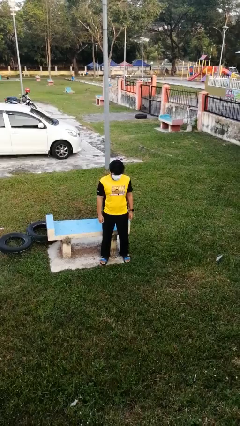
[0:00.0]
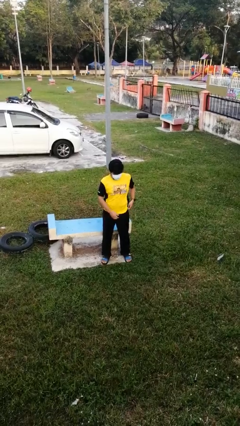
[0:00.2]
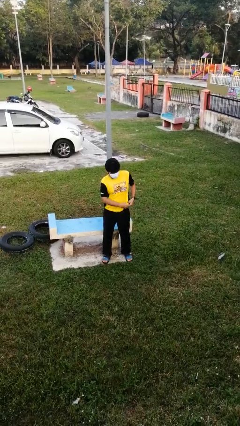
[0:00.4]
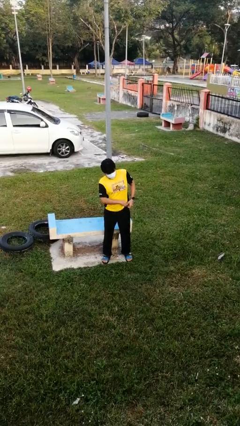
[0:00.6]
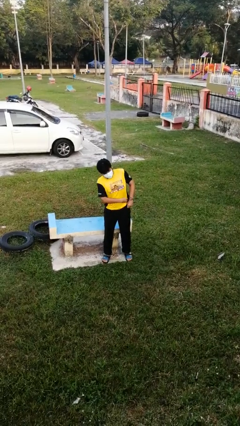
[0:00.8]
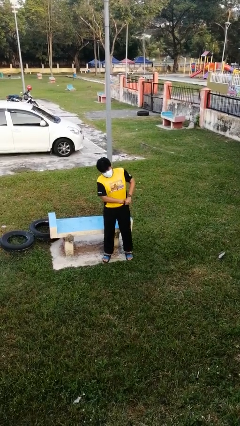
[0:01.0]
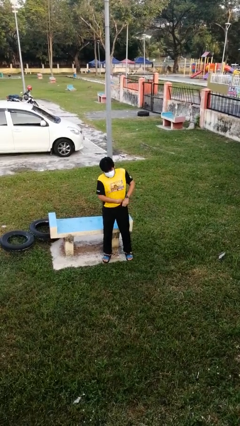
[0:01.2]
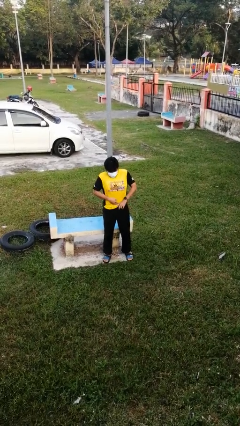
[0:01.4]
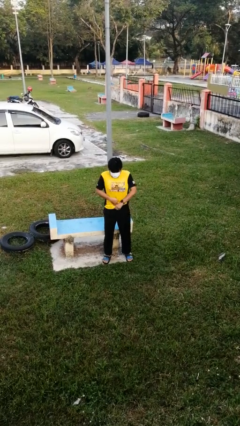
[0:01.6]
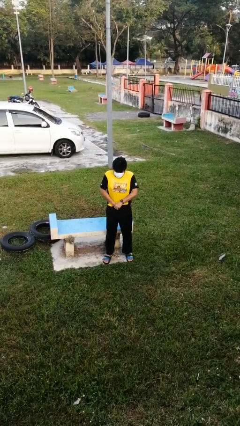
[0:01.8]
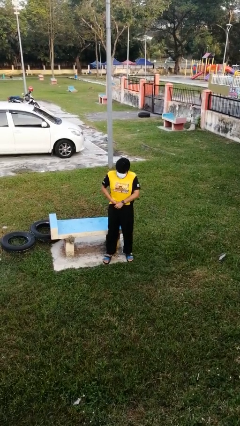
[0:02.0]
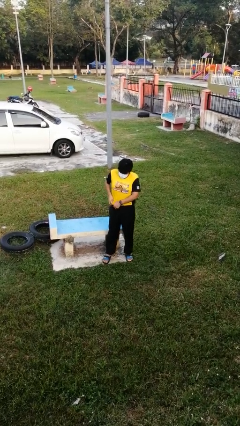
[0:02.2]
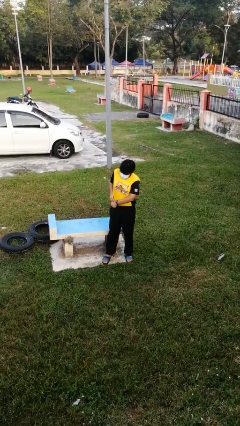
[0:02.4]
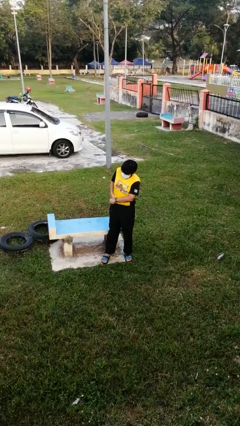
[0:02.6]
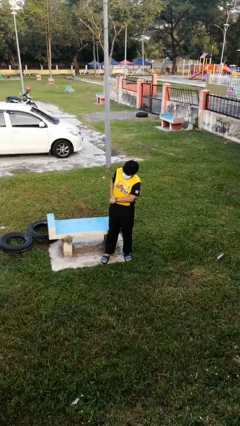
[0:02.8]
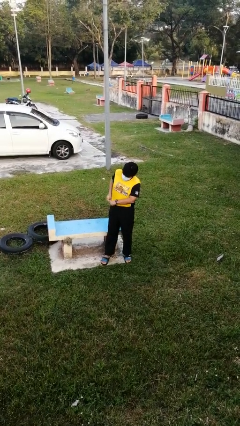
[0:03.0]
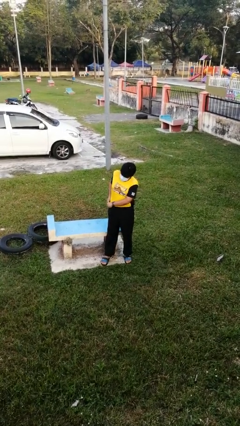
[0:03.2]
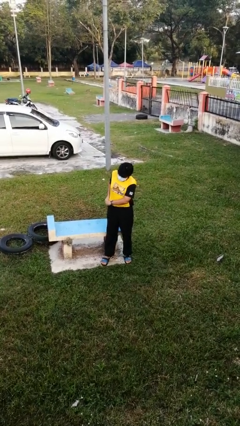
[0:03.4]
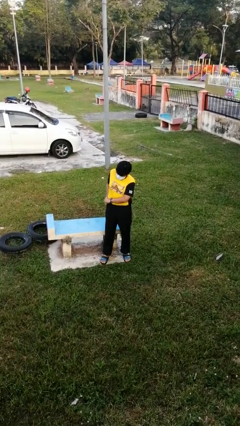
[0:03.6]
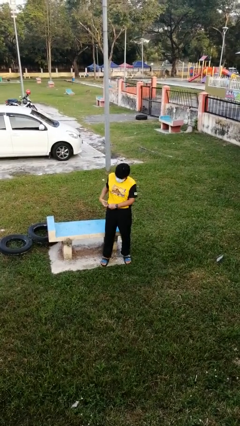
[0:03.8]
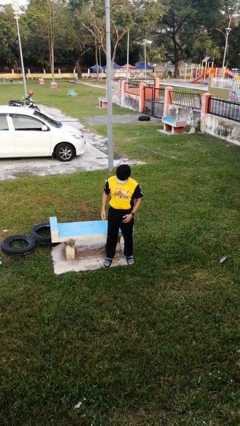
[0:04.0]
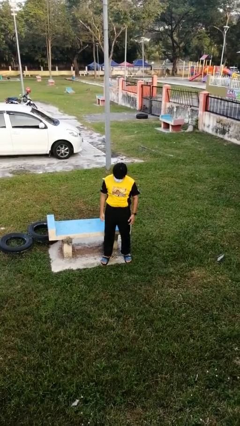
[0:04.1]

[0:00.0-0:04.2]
person tucks in shirt

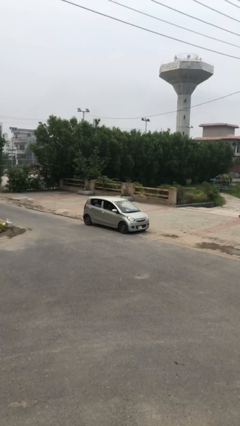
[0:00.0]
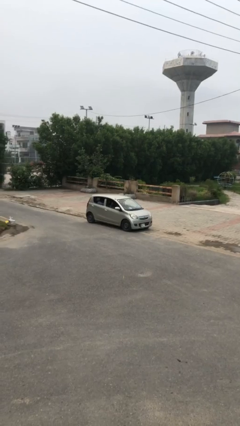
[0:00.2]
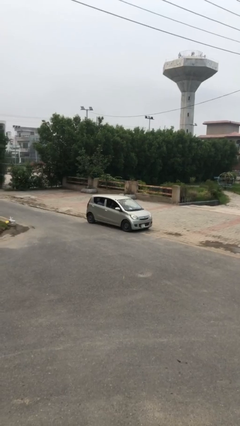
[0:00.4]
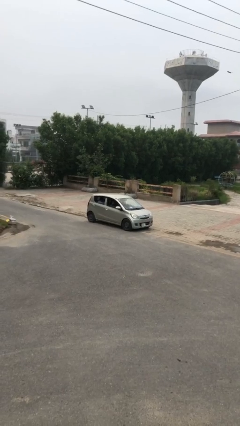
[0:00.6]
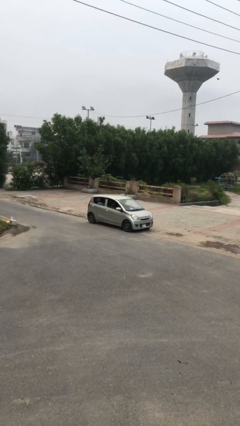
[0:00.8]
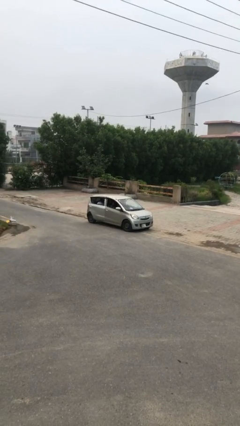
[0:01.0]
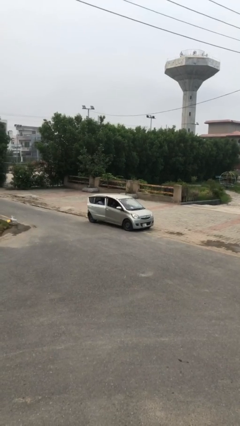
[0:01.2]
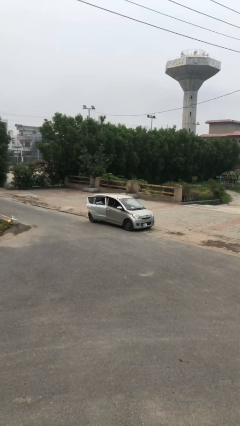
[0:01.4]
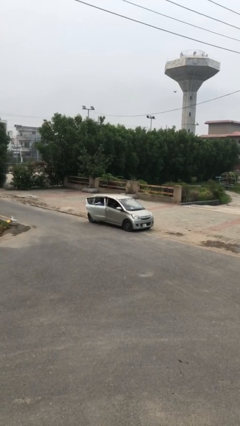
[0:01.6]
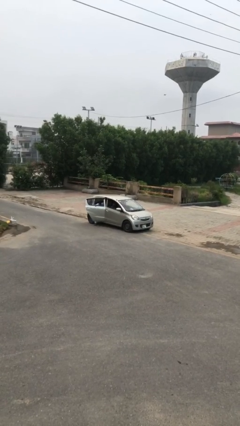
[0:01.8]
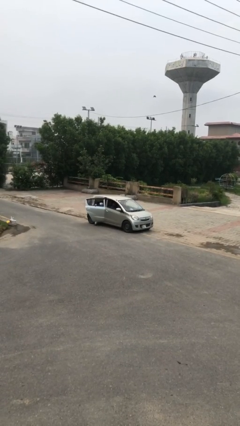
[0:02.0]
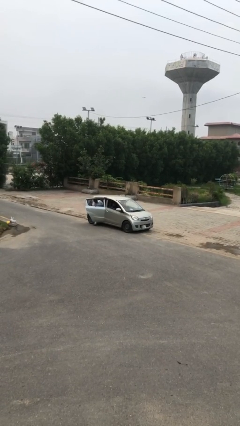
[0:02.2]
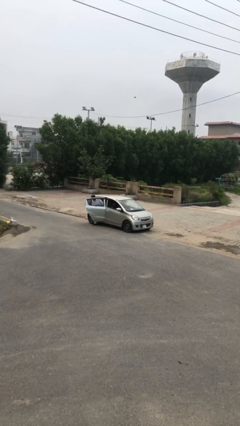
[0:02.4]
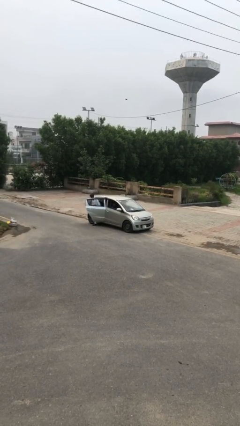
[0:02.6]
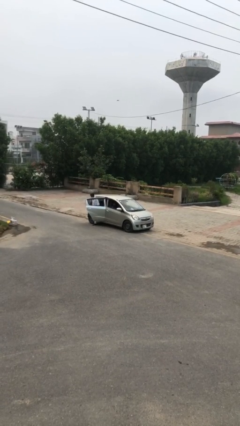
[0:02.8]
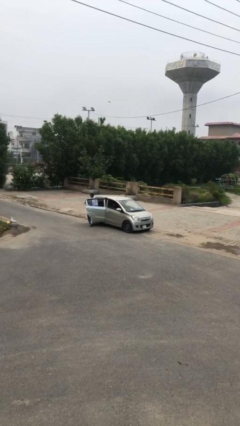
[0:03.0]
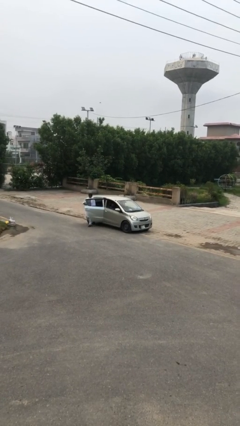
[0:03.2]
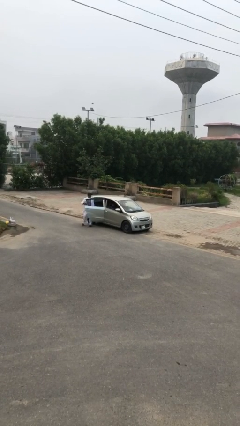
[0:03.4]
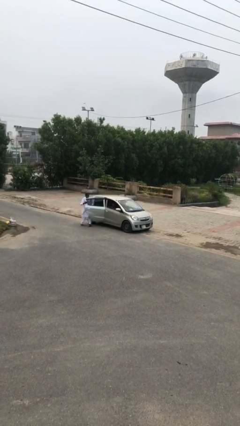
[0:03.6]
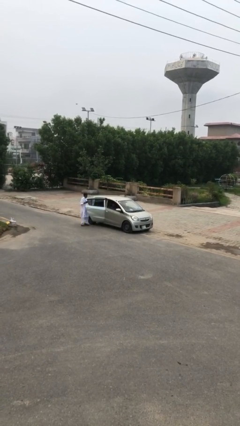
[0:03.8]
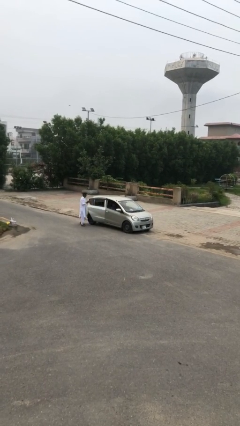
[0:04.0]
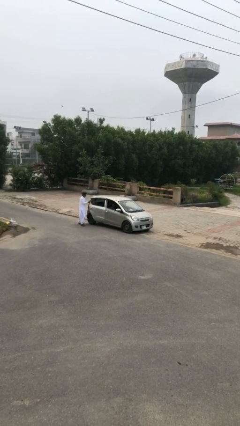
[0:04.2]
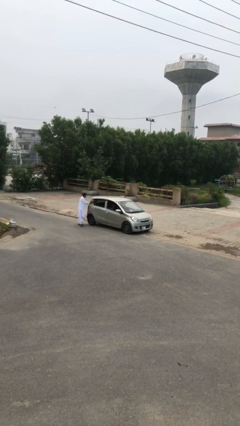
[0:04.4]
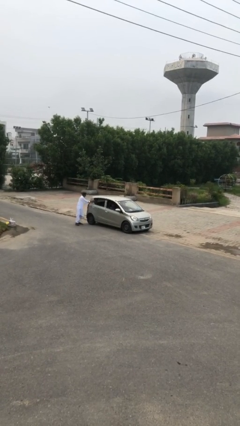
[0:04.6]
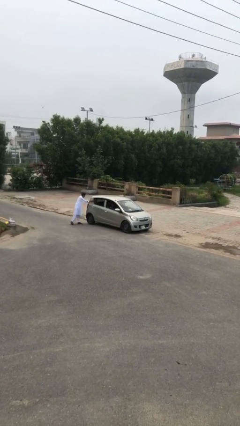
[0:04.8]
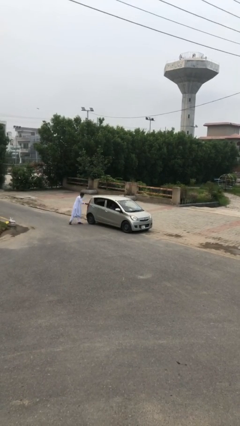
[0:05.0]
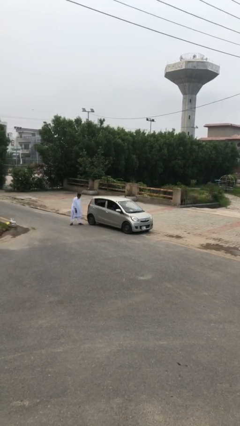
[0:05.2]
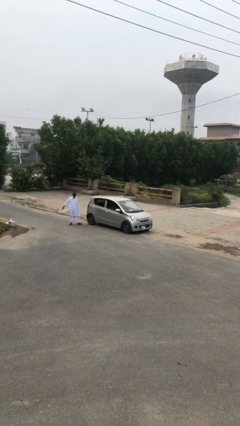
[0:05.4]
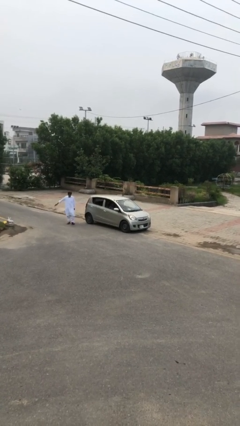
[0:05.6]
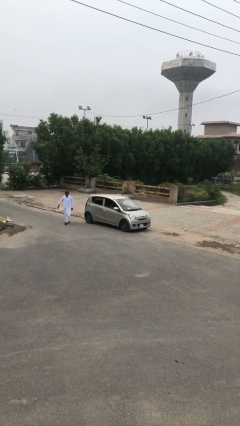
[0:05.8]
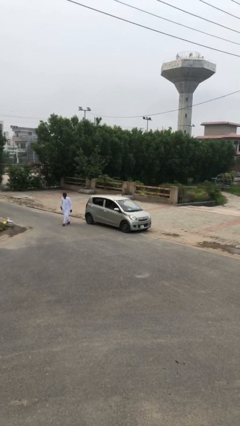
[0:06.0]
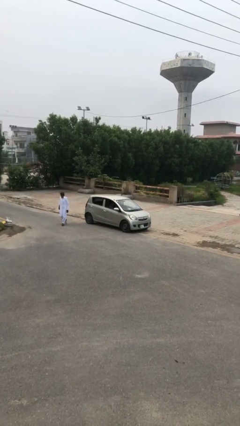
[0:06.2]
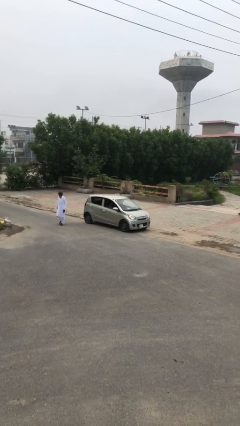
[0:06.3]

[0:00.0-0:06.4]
car drops off person

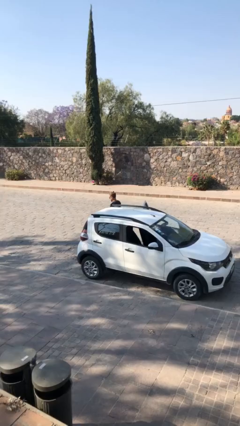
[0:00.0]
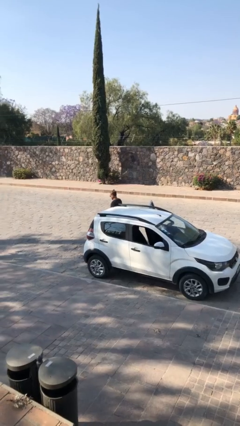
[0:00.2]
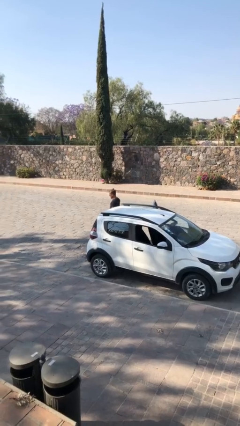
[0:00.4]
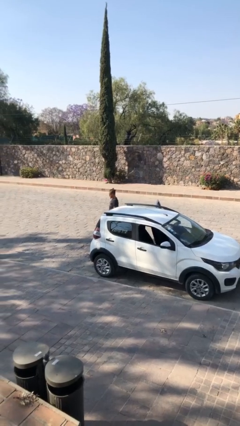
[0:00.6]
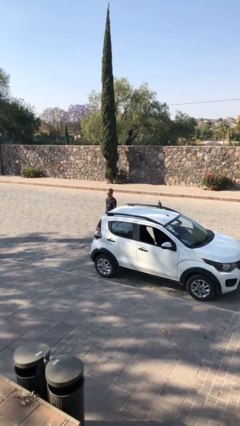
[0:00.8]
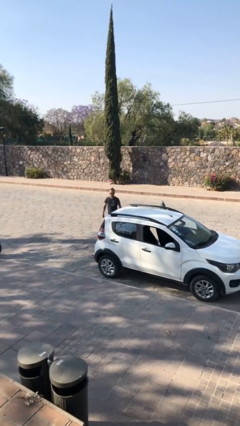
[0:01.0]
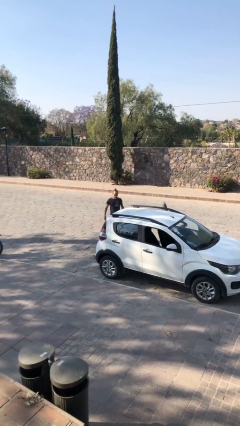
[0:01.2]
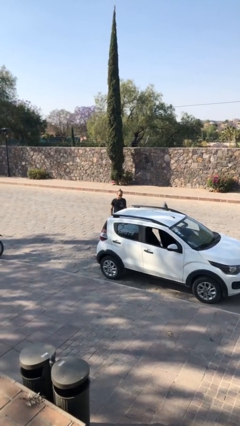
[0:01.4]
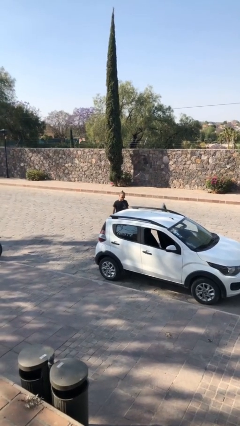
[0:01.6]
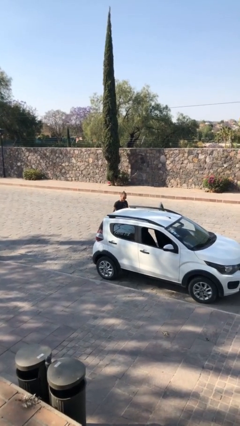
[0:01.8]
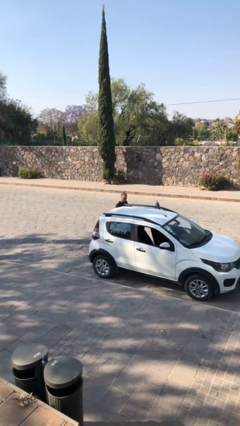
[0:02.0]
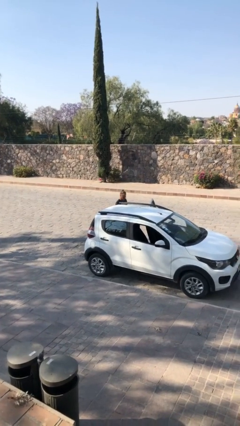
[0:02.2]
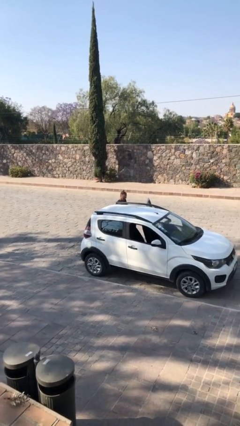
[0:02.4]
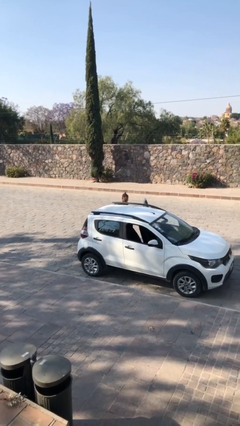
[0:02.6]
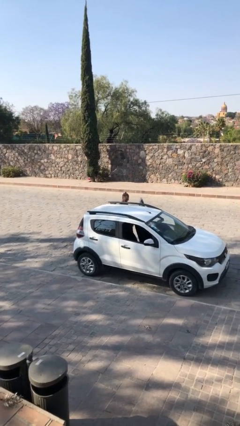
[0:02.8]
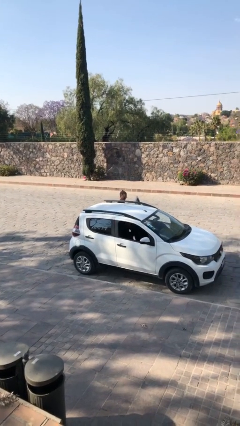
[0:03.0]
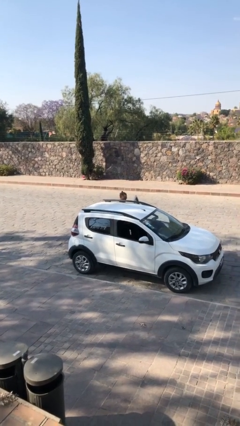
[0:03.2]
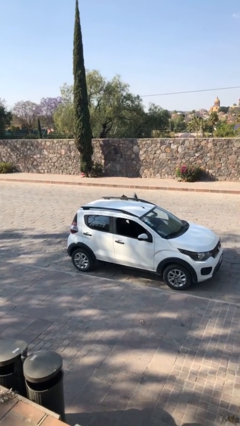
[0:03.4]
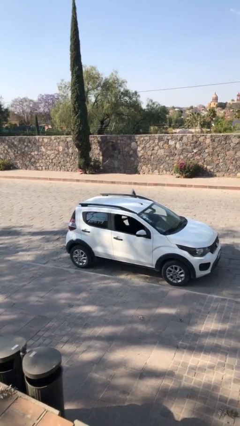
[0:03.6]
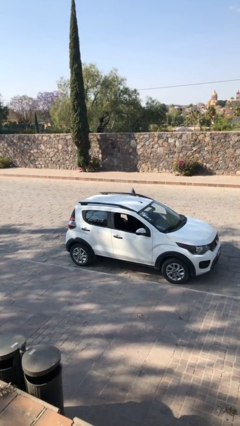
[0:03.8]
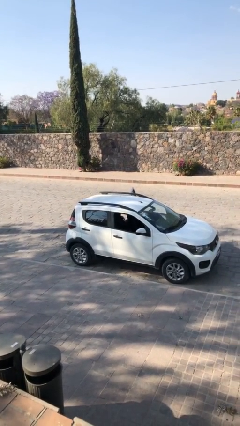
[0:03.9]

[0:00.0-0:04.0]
person enters car

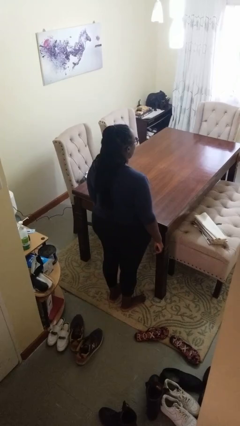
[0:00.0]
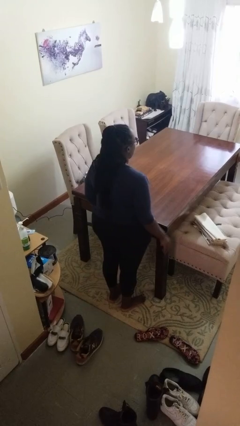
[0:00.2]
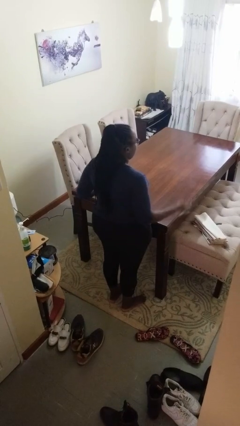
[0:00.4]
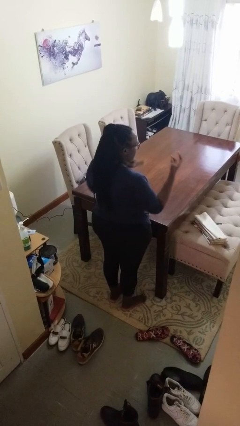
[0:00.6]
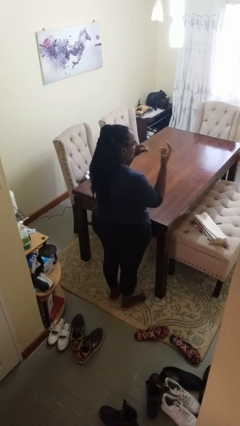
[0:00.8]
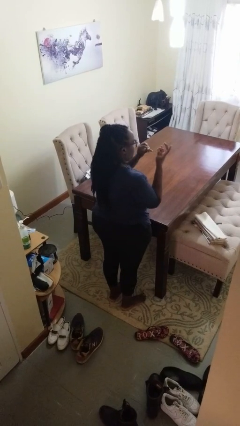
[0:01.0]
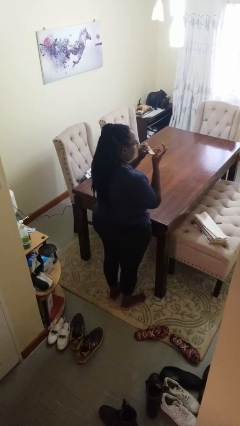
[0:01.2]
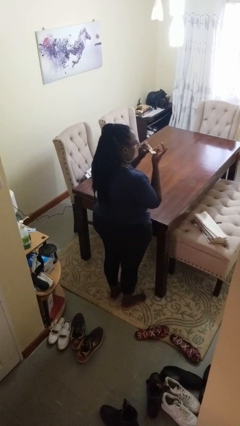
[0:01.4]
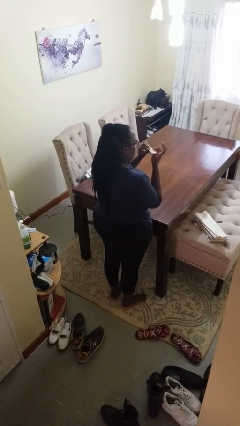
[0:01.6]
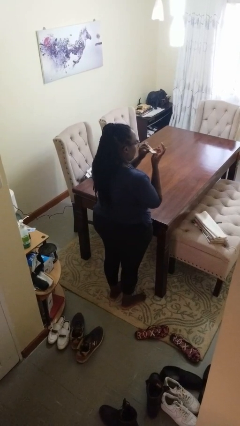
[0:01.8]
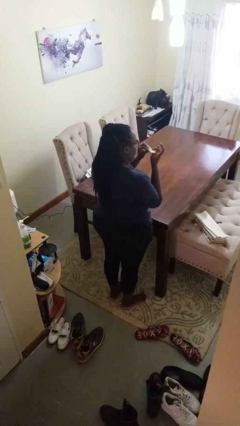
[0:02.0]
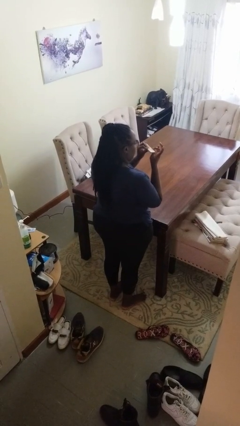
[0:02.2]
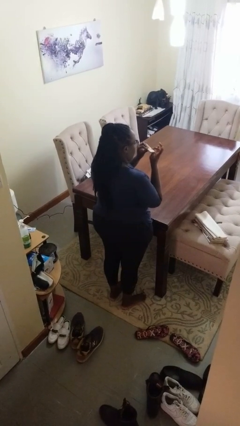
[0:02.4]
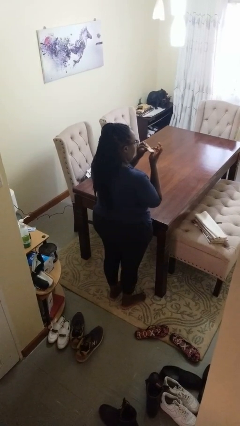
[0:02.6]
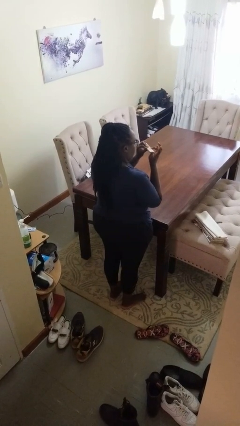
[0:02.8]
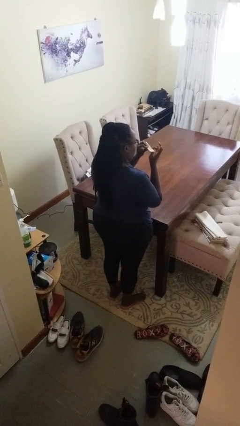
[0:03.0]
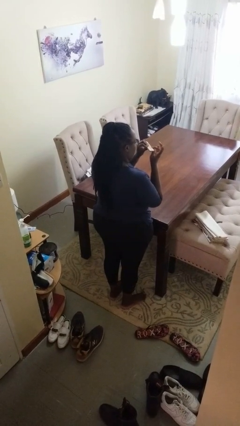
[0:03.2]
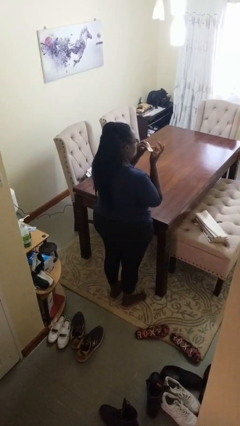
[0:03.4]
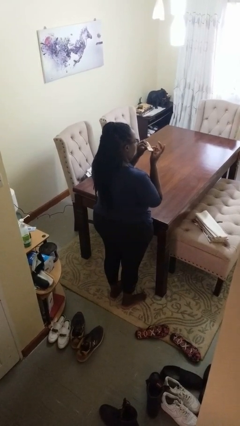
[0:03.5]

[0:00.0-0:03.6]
person files fingernails
